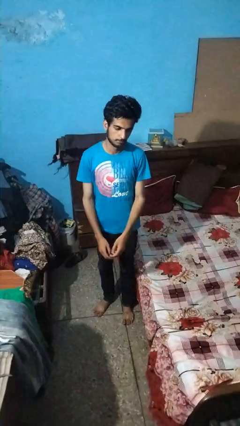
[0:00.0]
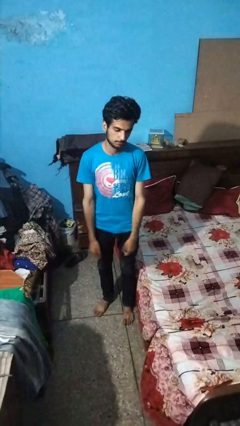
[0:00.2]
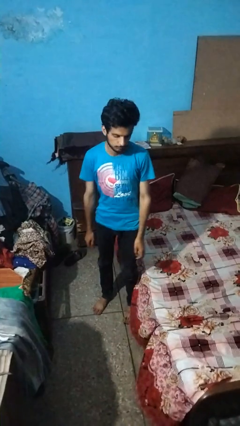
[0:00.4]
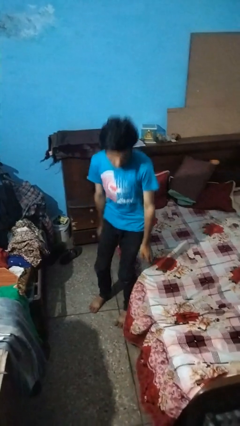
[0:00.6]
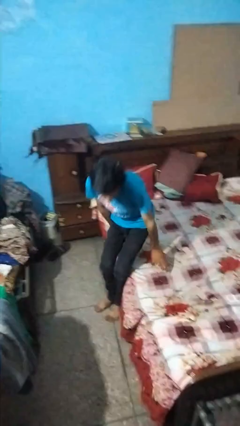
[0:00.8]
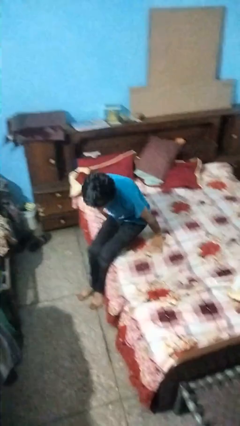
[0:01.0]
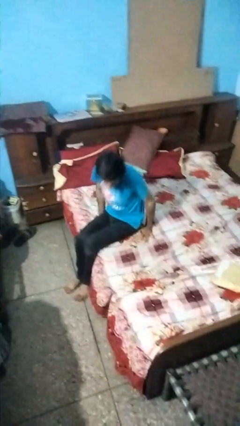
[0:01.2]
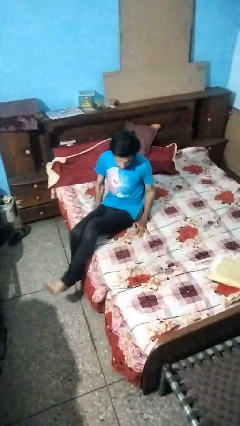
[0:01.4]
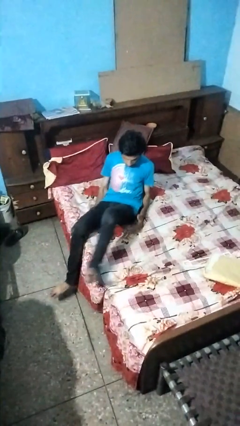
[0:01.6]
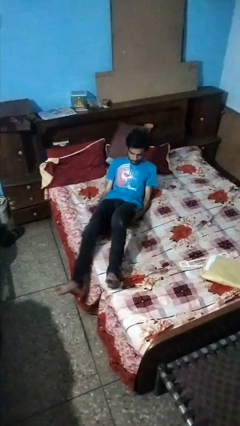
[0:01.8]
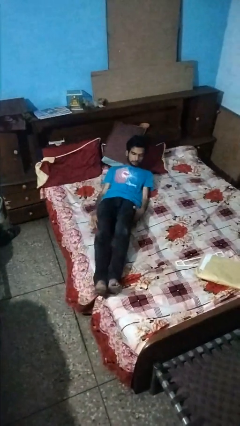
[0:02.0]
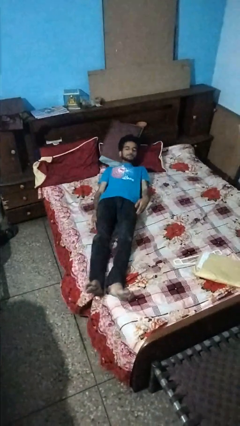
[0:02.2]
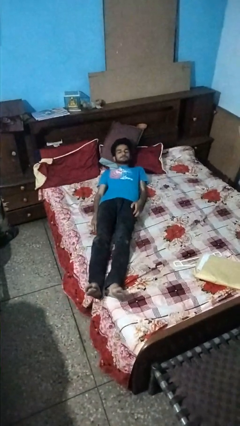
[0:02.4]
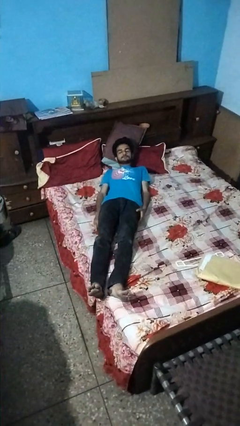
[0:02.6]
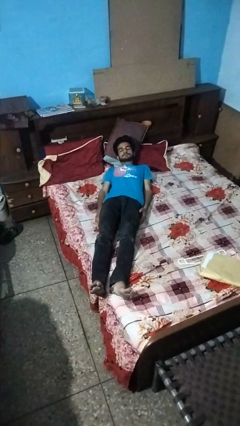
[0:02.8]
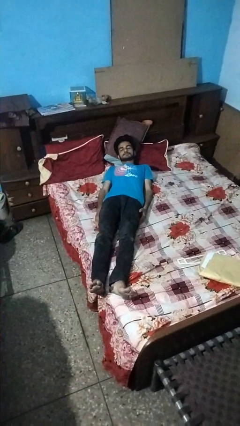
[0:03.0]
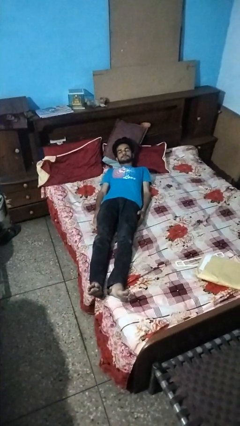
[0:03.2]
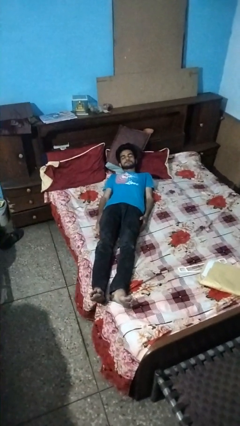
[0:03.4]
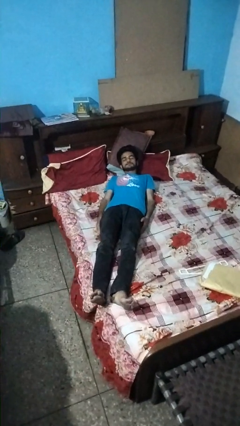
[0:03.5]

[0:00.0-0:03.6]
person lies down on bed

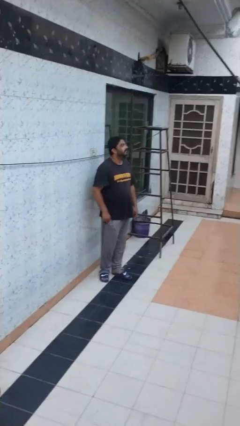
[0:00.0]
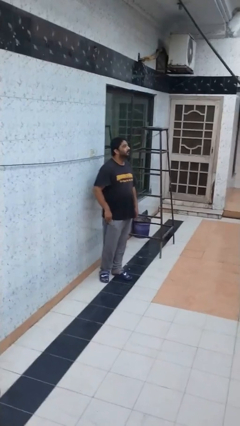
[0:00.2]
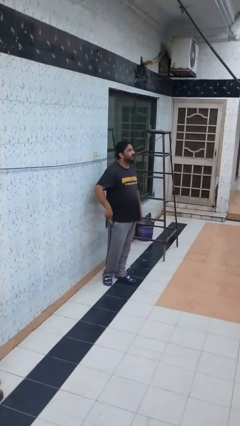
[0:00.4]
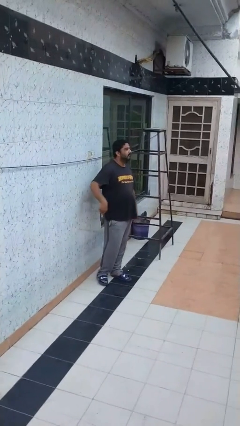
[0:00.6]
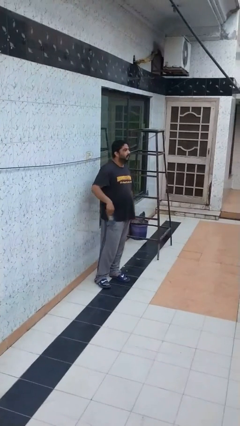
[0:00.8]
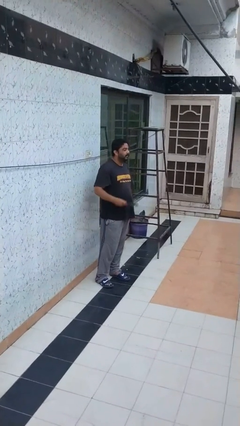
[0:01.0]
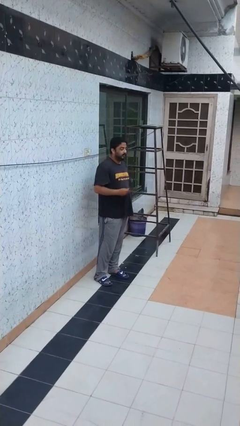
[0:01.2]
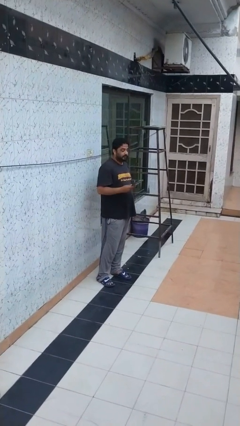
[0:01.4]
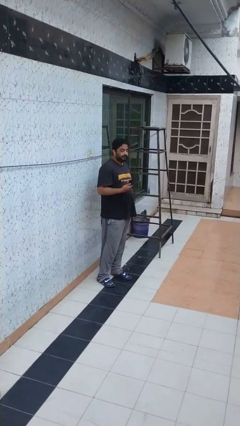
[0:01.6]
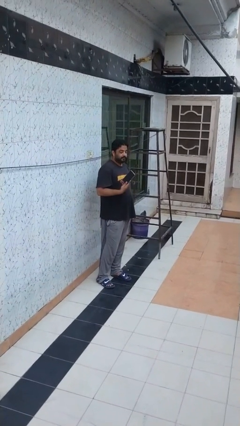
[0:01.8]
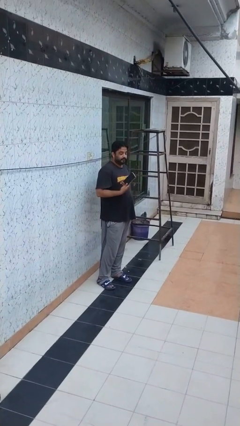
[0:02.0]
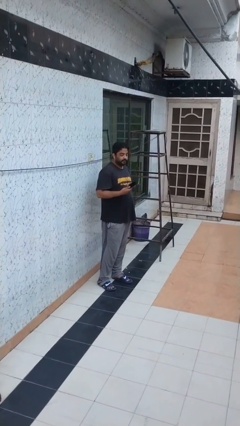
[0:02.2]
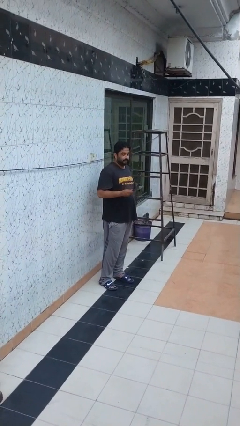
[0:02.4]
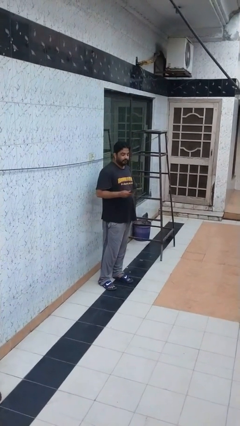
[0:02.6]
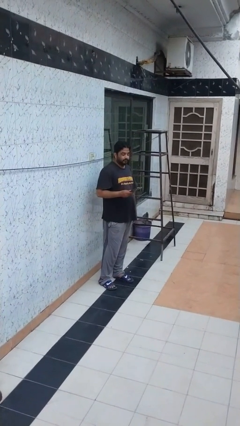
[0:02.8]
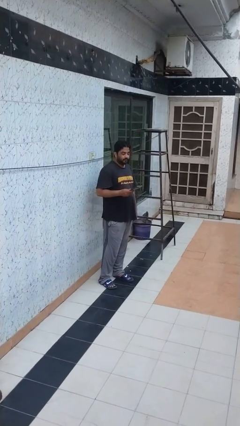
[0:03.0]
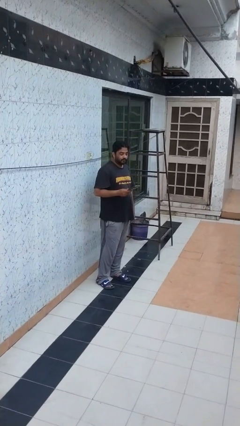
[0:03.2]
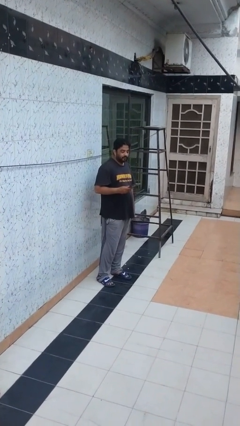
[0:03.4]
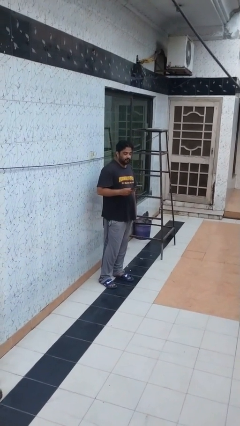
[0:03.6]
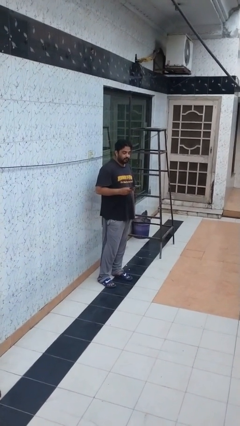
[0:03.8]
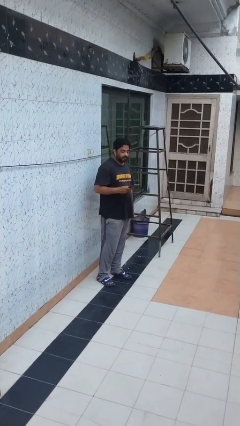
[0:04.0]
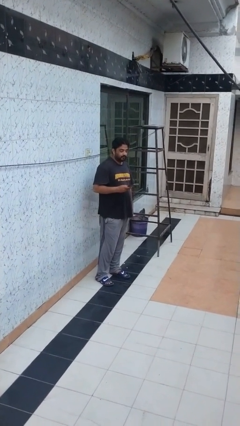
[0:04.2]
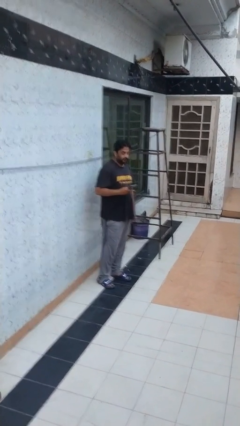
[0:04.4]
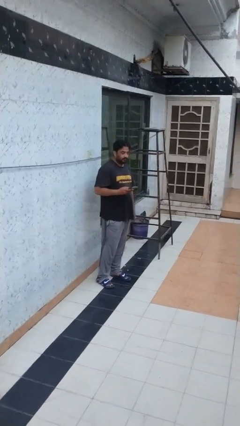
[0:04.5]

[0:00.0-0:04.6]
person takes phone from pocket

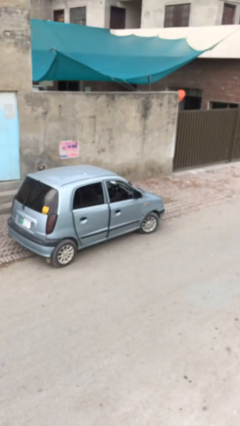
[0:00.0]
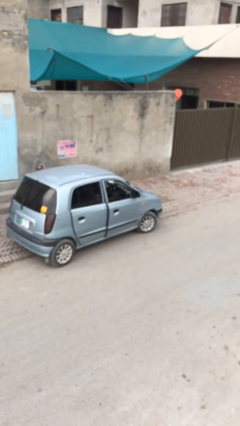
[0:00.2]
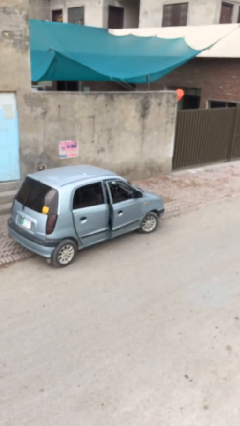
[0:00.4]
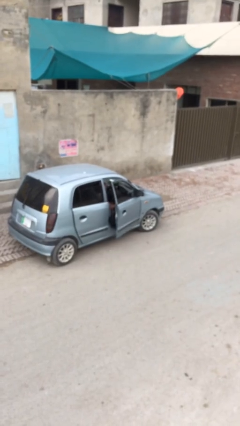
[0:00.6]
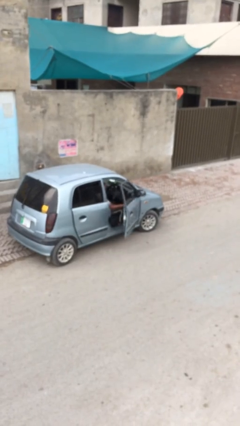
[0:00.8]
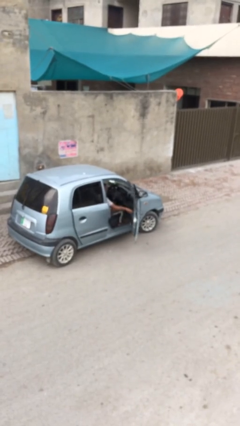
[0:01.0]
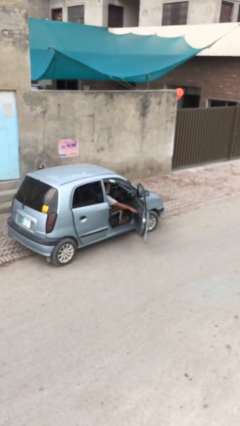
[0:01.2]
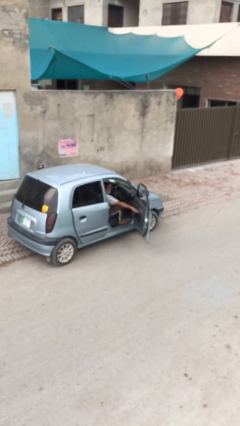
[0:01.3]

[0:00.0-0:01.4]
person opens car door

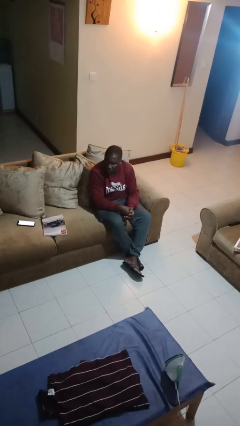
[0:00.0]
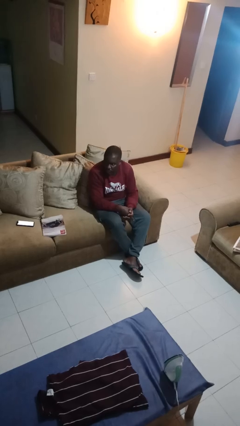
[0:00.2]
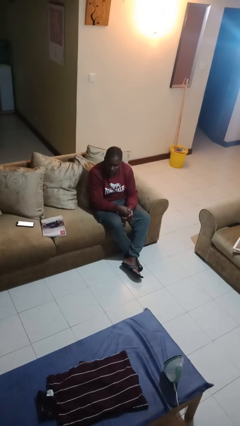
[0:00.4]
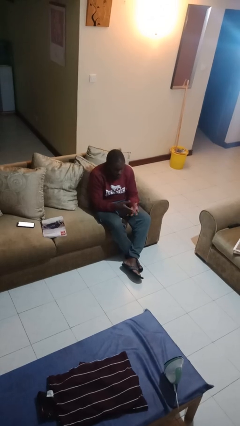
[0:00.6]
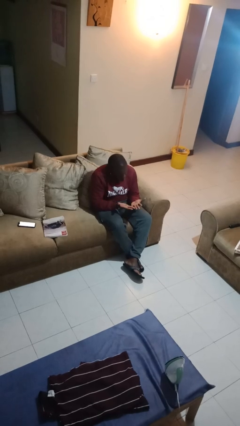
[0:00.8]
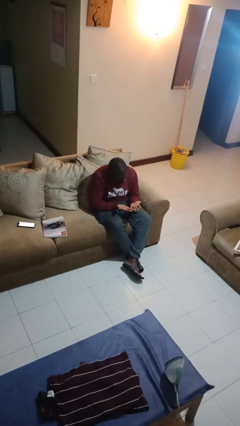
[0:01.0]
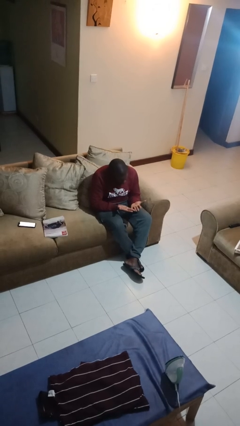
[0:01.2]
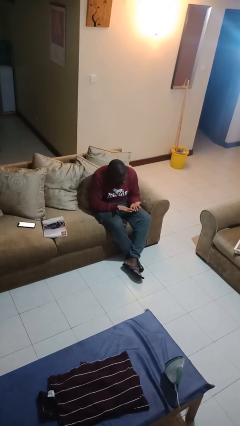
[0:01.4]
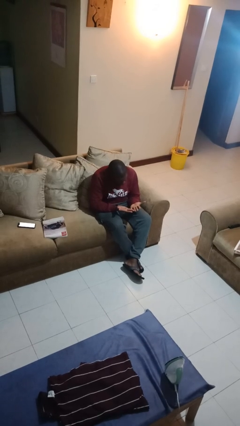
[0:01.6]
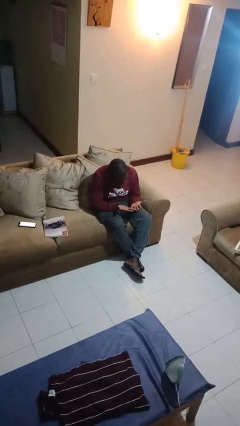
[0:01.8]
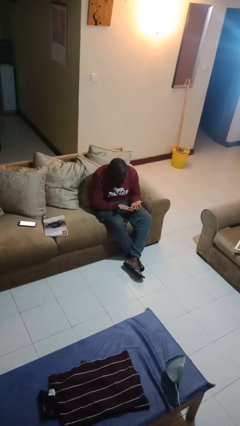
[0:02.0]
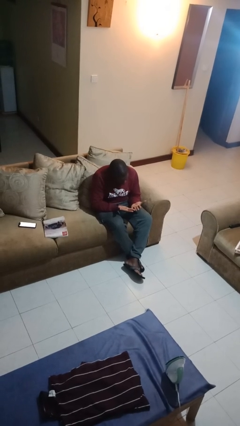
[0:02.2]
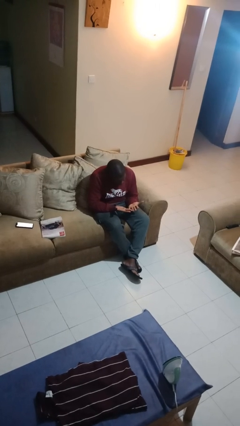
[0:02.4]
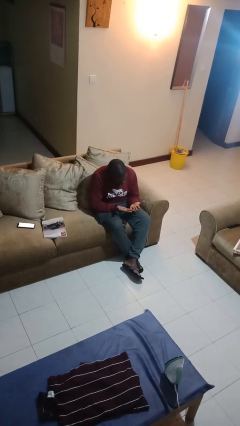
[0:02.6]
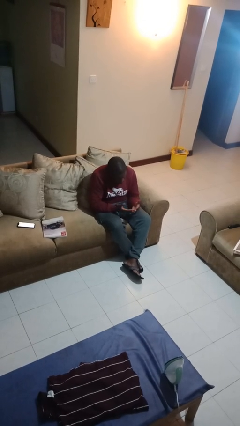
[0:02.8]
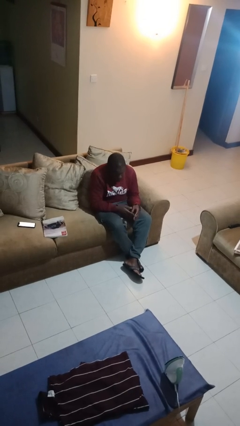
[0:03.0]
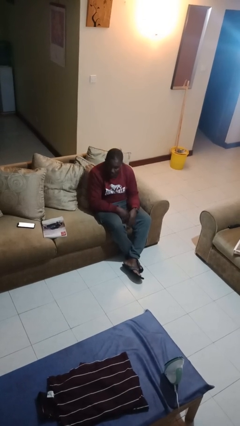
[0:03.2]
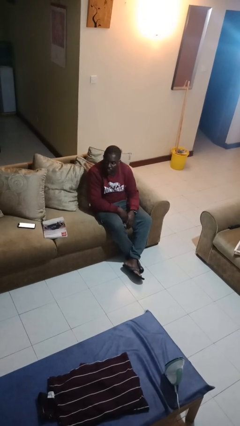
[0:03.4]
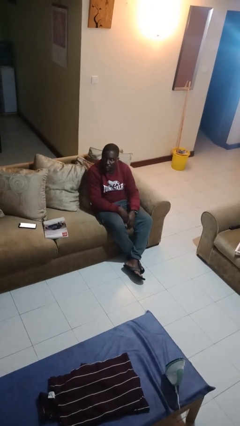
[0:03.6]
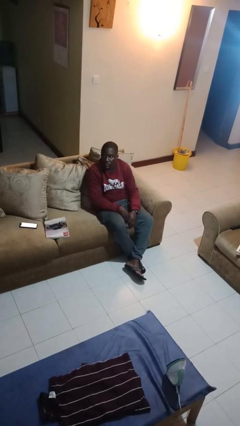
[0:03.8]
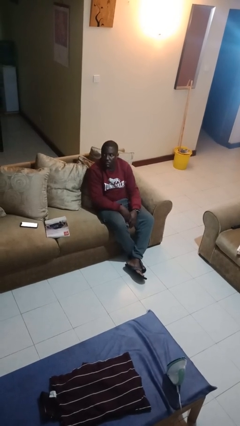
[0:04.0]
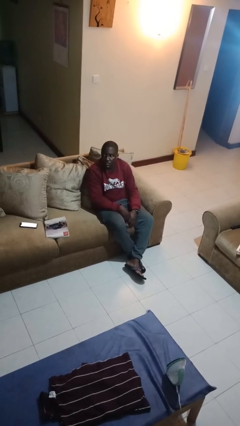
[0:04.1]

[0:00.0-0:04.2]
person looks at hands in lap

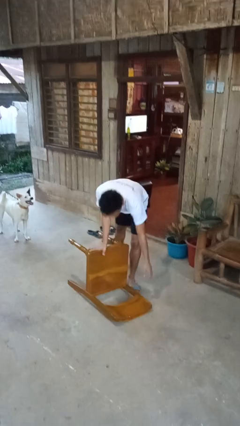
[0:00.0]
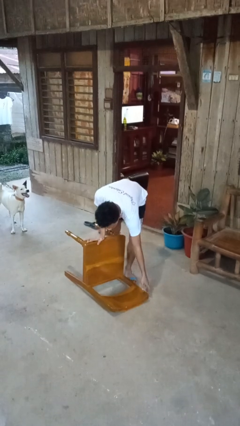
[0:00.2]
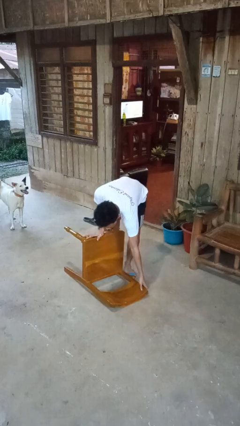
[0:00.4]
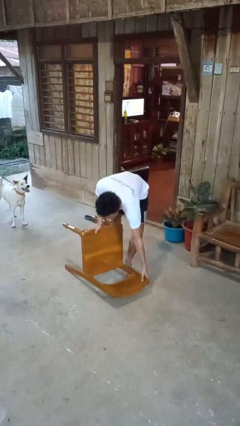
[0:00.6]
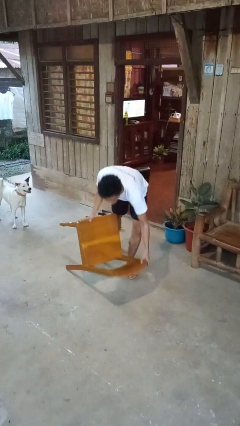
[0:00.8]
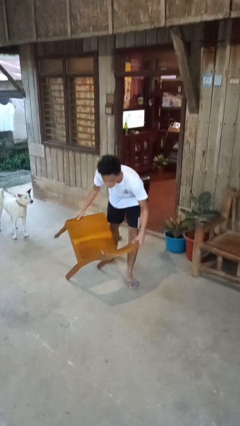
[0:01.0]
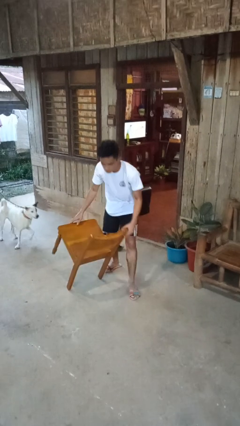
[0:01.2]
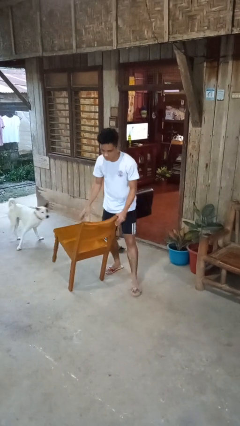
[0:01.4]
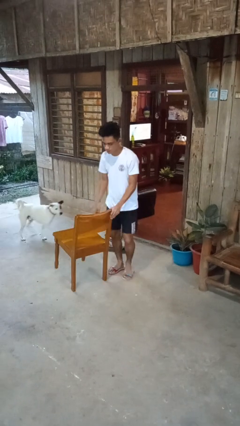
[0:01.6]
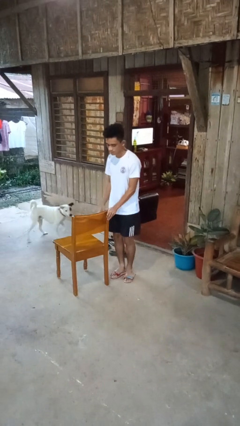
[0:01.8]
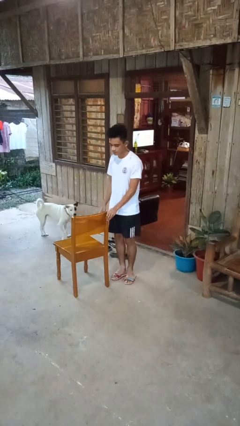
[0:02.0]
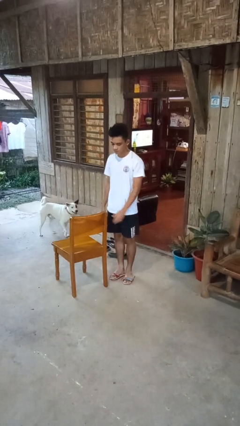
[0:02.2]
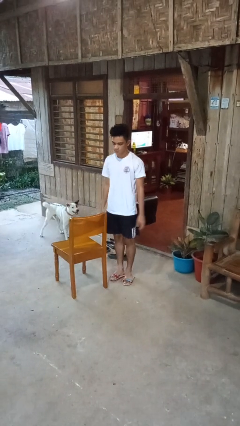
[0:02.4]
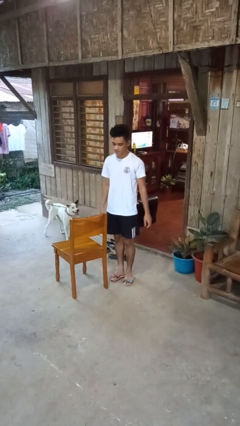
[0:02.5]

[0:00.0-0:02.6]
person sets upright furniture

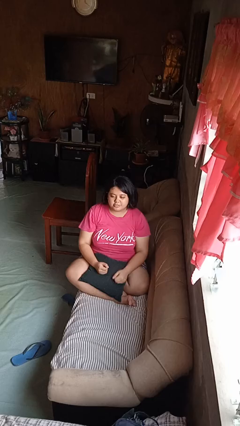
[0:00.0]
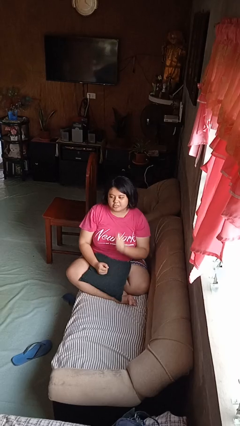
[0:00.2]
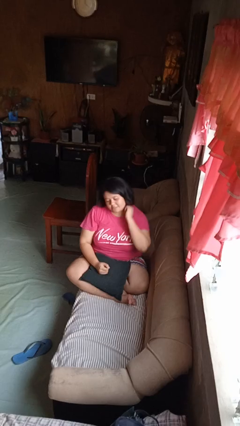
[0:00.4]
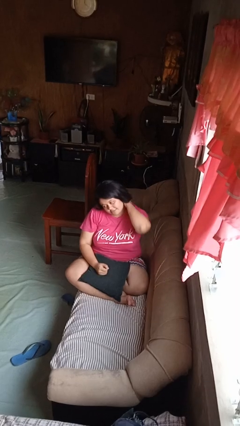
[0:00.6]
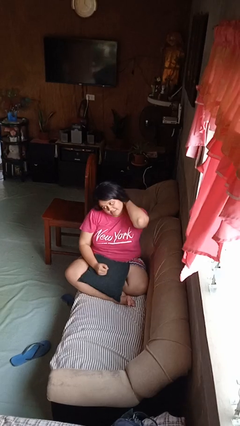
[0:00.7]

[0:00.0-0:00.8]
person rubs neck

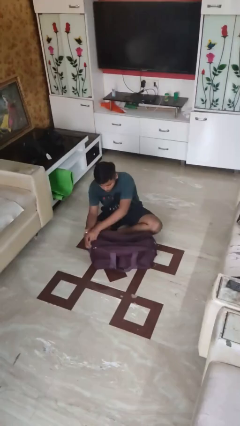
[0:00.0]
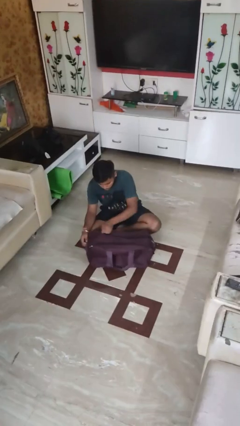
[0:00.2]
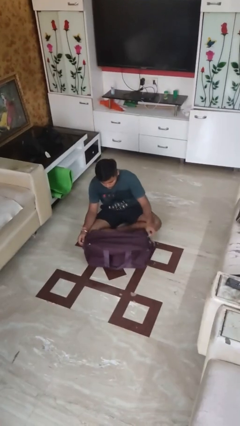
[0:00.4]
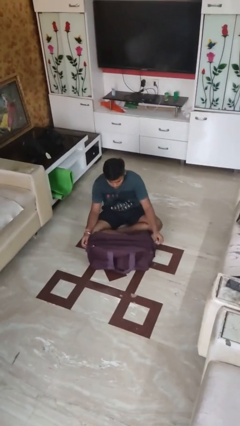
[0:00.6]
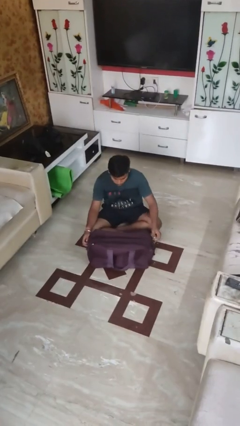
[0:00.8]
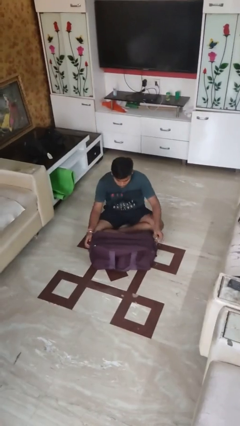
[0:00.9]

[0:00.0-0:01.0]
person closes suitcase
